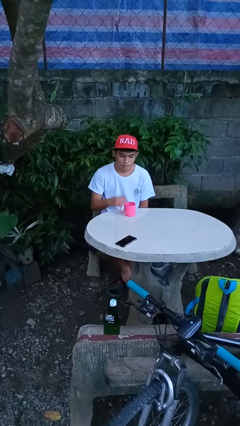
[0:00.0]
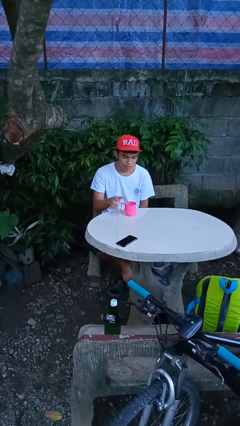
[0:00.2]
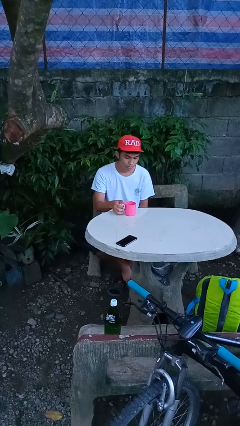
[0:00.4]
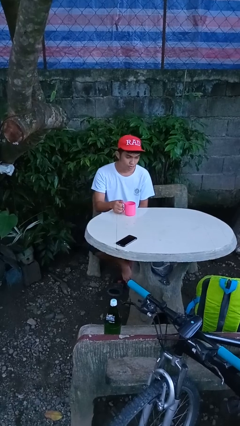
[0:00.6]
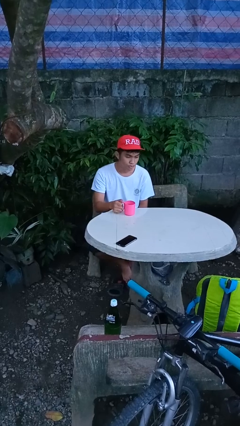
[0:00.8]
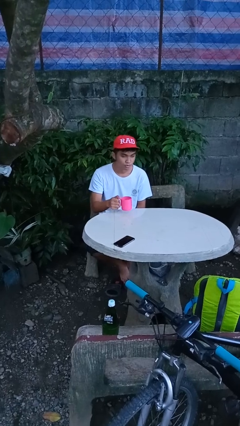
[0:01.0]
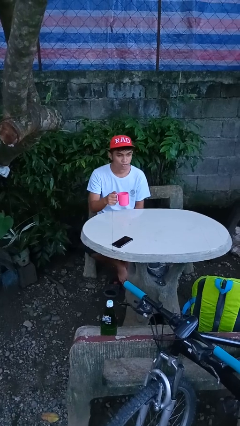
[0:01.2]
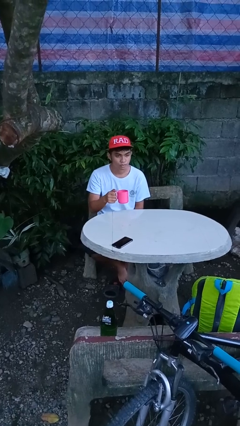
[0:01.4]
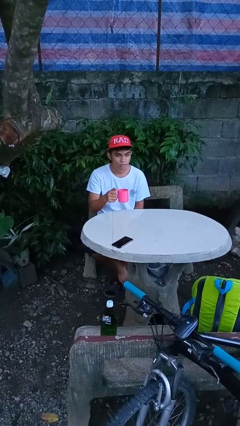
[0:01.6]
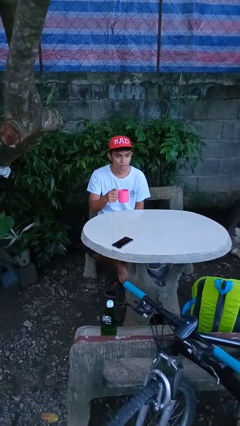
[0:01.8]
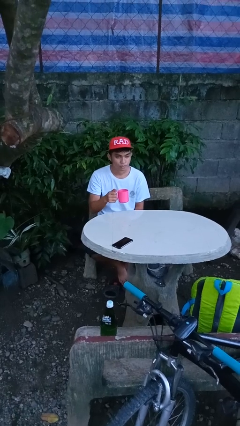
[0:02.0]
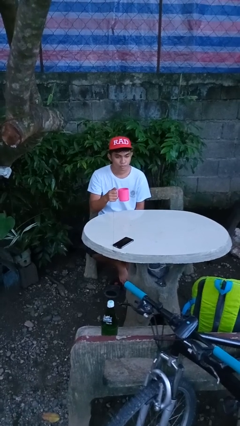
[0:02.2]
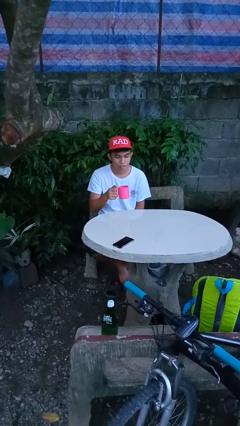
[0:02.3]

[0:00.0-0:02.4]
person picks up object from table

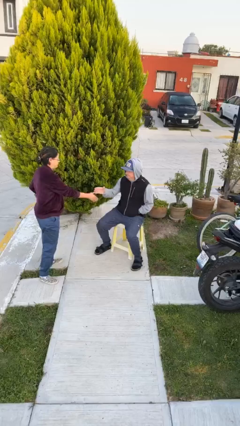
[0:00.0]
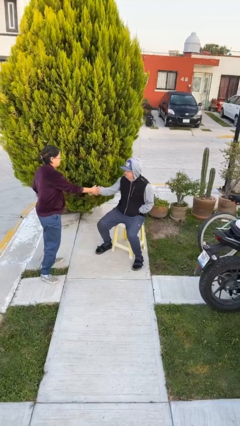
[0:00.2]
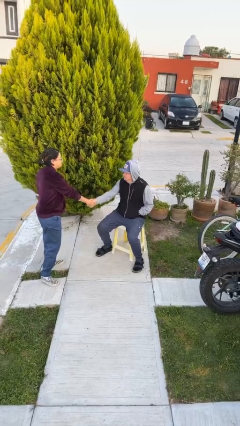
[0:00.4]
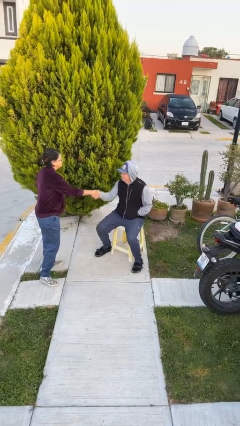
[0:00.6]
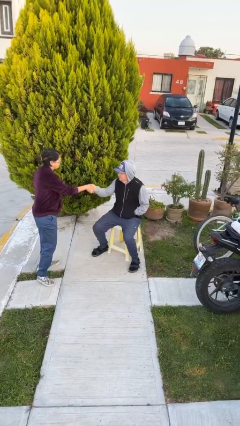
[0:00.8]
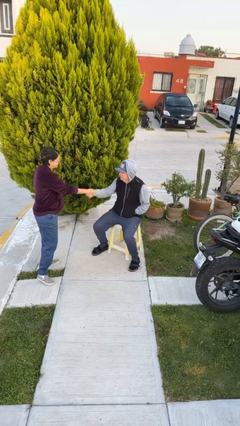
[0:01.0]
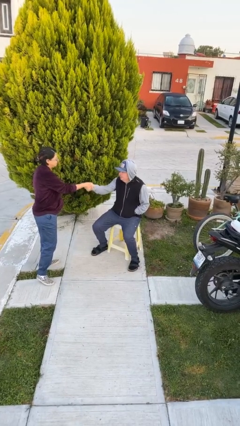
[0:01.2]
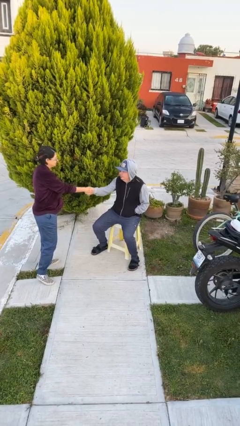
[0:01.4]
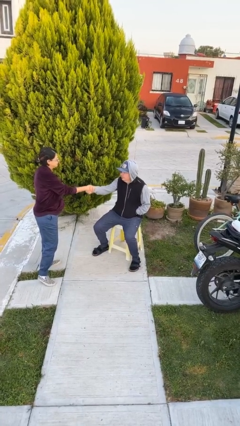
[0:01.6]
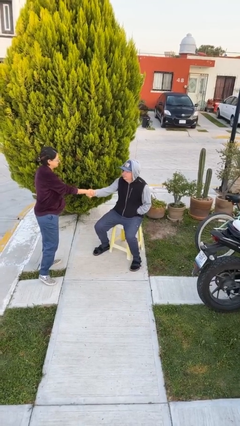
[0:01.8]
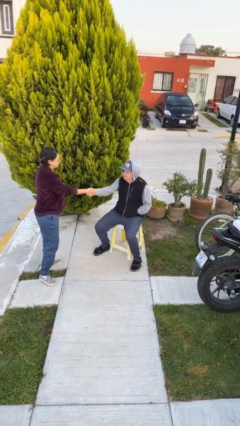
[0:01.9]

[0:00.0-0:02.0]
person shakes hand

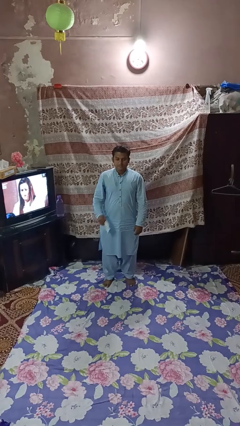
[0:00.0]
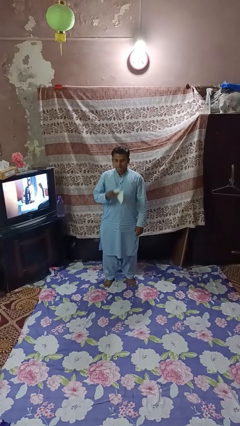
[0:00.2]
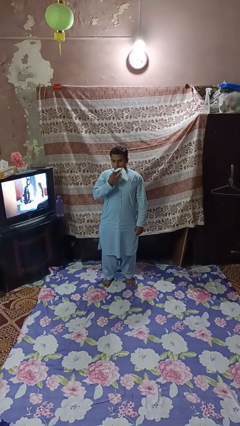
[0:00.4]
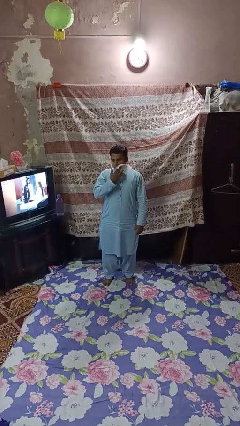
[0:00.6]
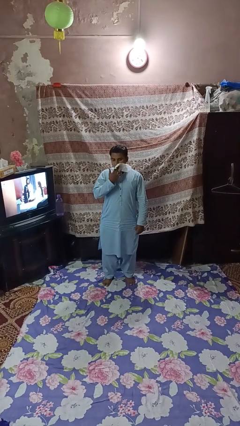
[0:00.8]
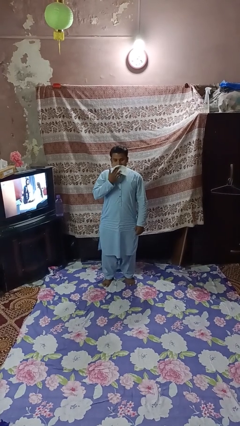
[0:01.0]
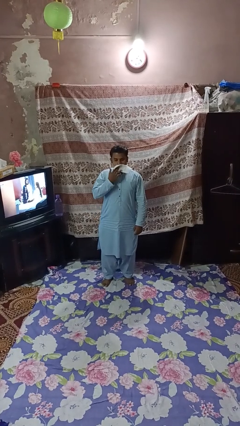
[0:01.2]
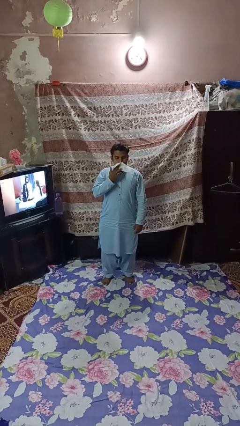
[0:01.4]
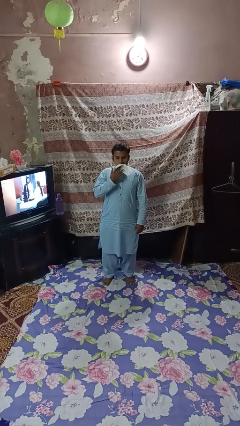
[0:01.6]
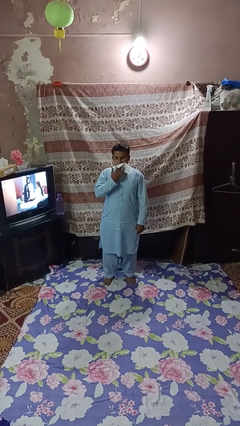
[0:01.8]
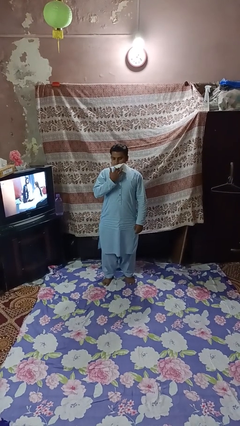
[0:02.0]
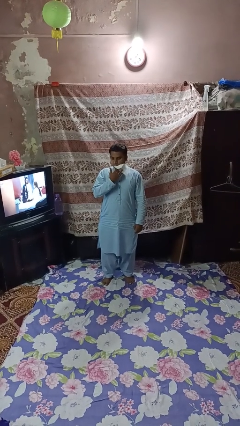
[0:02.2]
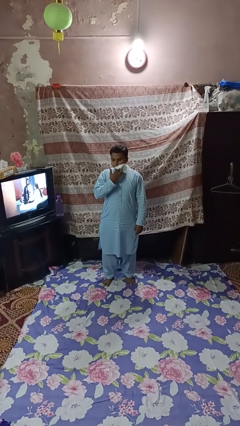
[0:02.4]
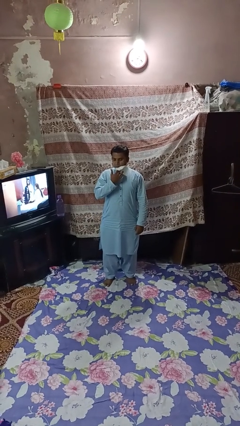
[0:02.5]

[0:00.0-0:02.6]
person wipes mouth with napkin

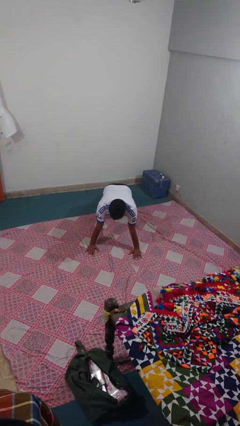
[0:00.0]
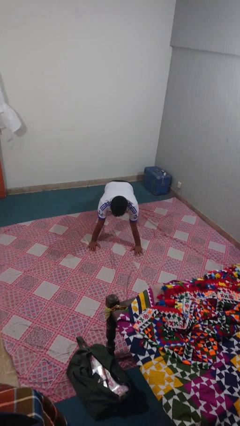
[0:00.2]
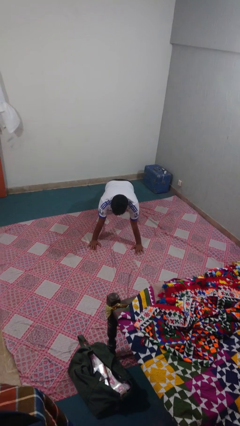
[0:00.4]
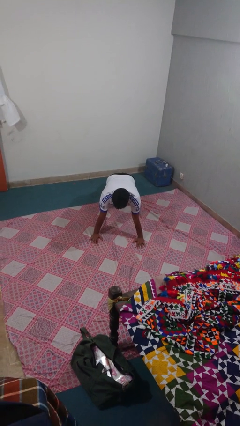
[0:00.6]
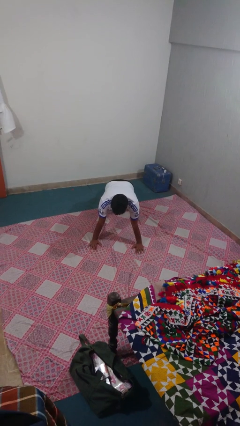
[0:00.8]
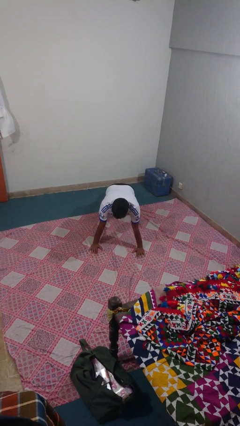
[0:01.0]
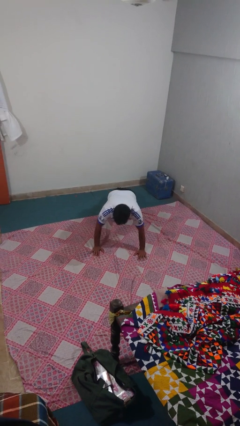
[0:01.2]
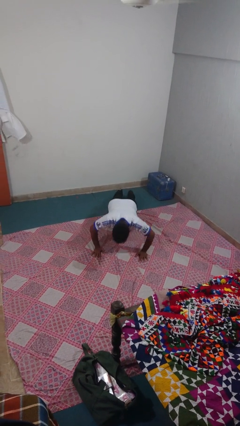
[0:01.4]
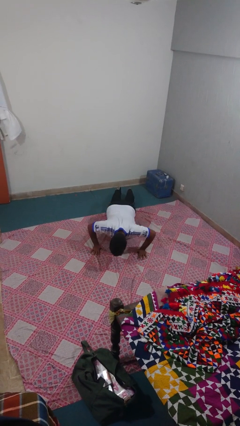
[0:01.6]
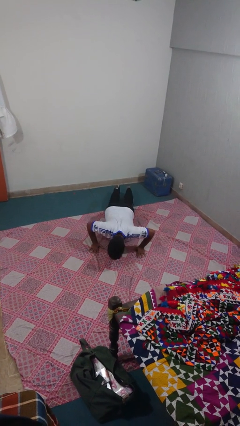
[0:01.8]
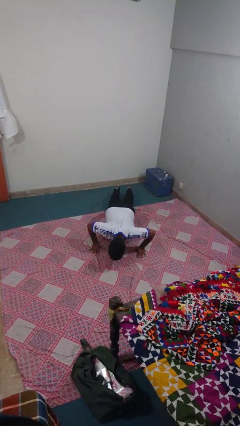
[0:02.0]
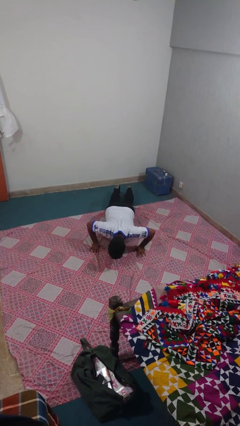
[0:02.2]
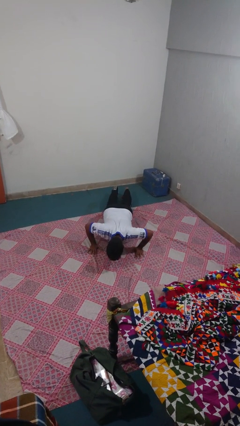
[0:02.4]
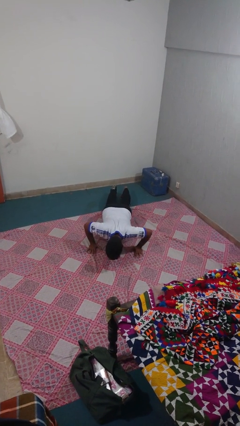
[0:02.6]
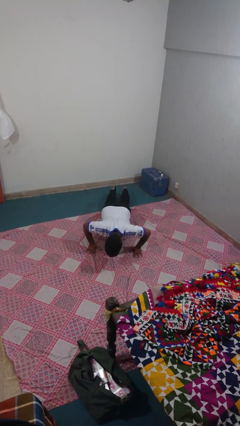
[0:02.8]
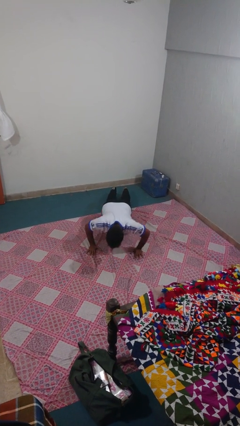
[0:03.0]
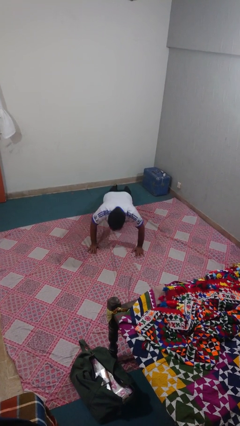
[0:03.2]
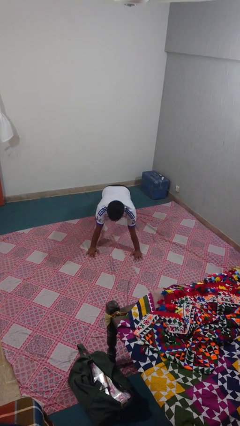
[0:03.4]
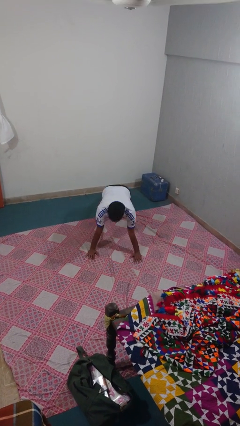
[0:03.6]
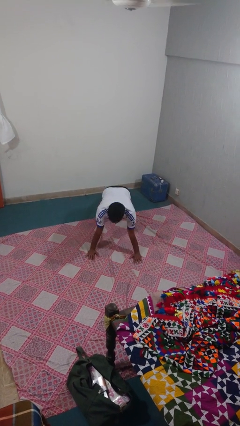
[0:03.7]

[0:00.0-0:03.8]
person exercises with pushup

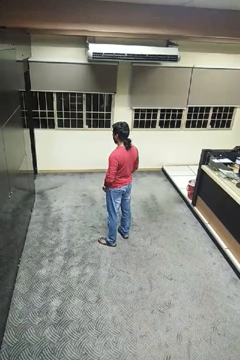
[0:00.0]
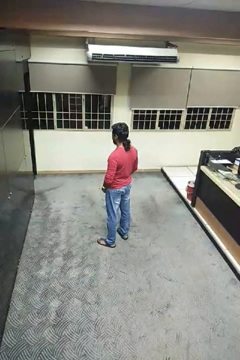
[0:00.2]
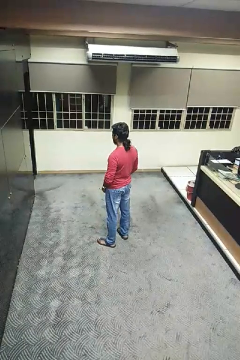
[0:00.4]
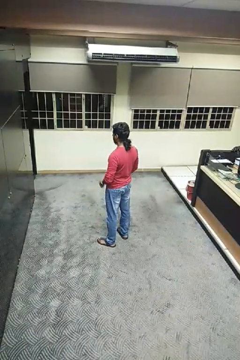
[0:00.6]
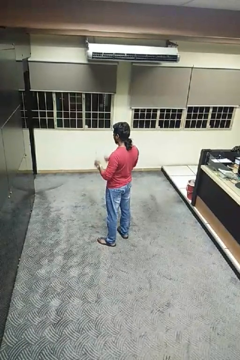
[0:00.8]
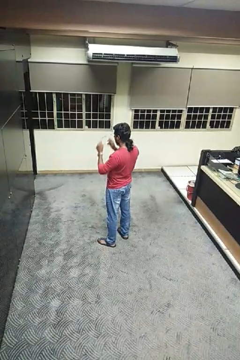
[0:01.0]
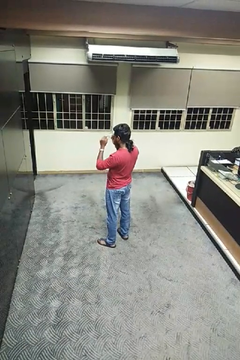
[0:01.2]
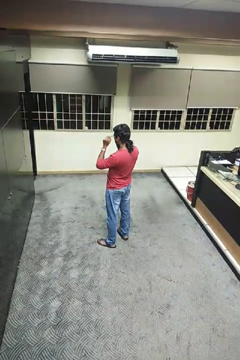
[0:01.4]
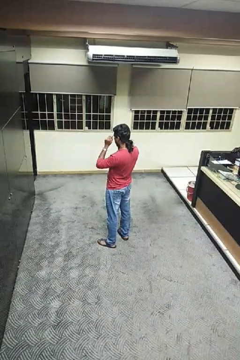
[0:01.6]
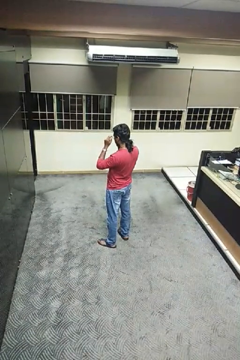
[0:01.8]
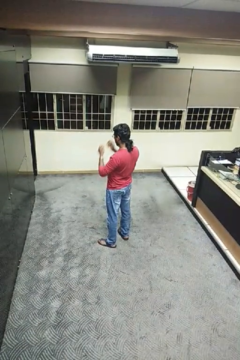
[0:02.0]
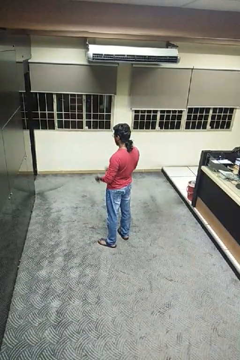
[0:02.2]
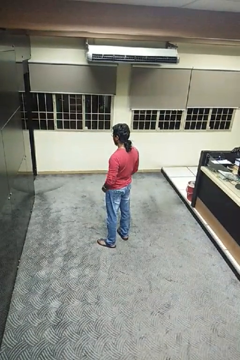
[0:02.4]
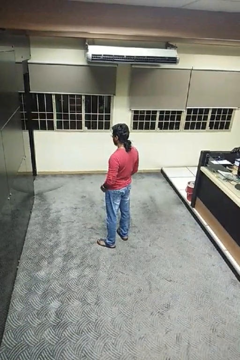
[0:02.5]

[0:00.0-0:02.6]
person puts on glasses

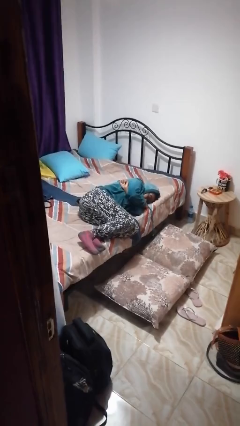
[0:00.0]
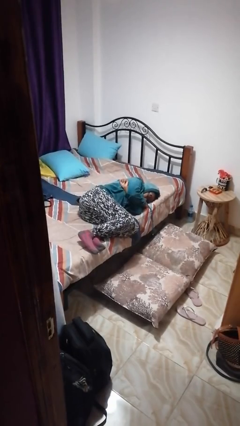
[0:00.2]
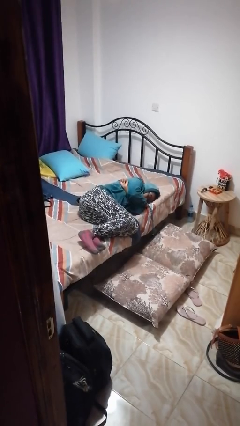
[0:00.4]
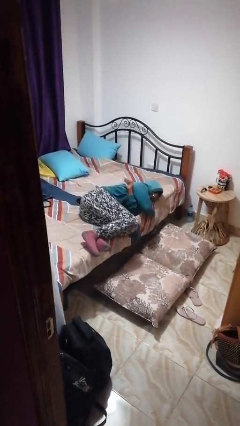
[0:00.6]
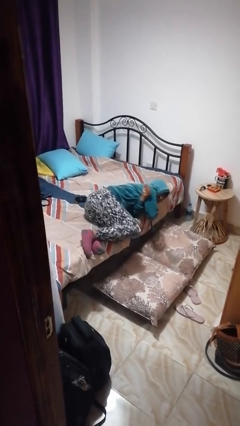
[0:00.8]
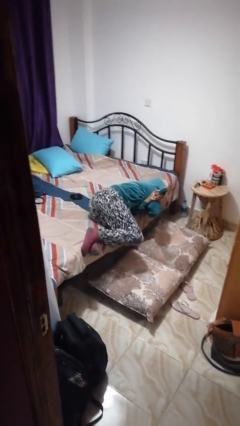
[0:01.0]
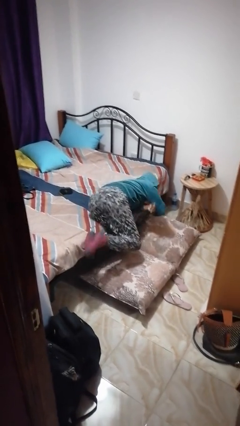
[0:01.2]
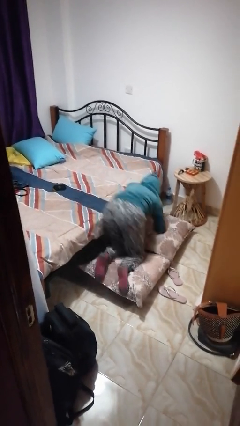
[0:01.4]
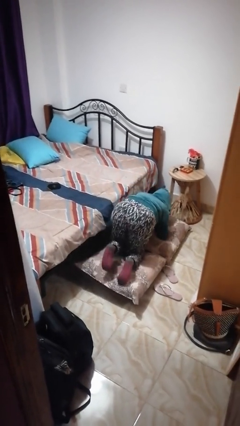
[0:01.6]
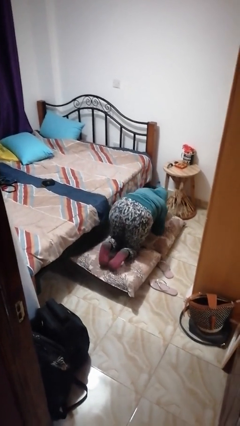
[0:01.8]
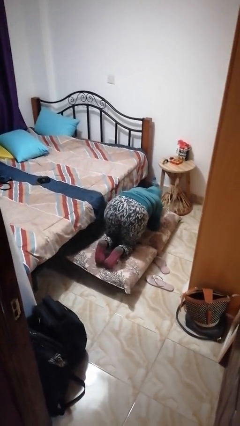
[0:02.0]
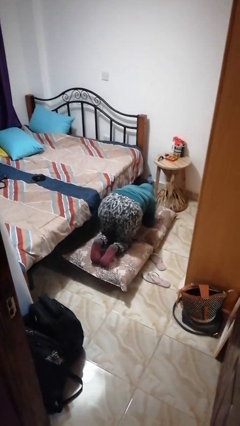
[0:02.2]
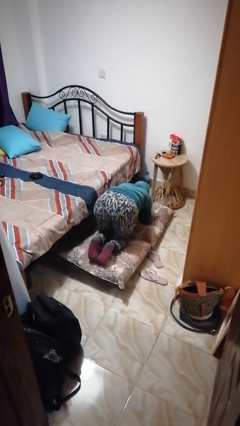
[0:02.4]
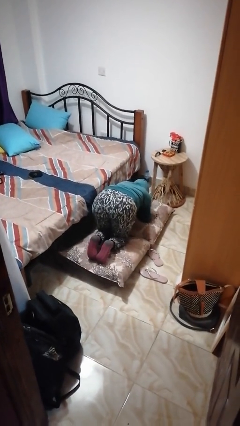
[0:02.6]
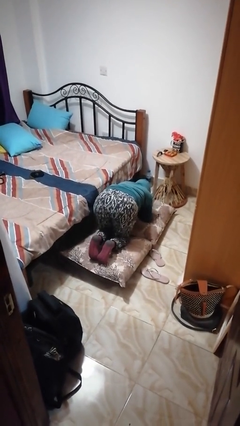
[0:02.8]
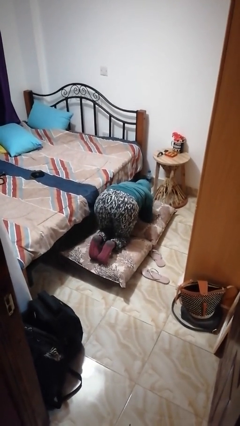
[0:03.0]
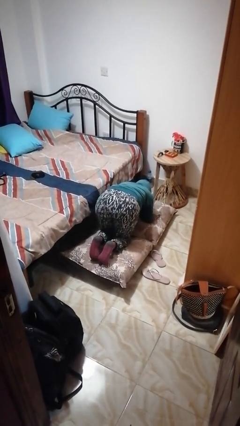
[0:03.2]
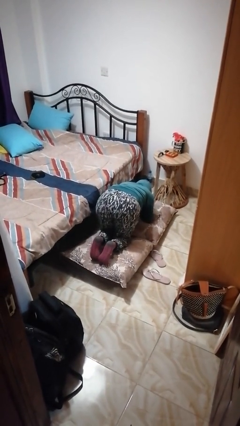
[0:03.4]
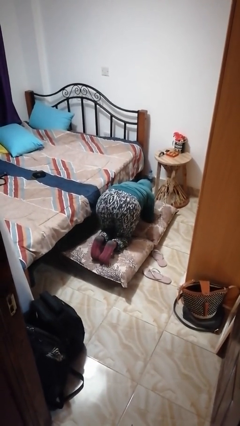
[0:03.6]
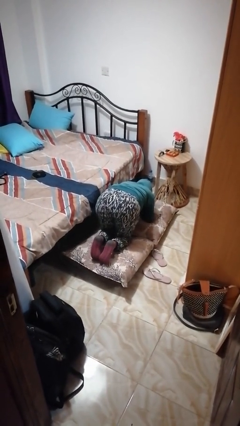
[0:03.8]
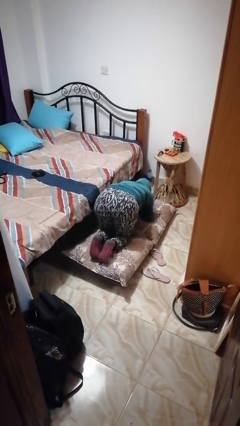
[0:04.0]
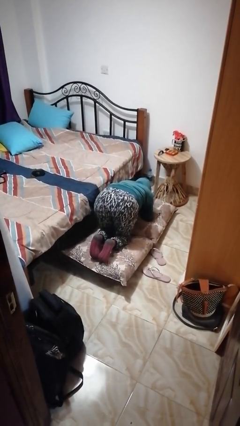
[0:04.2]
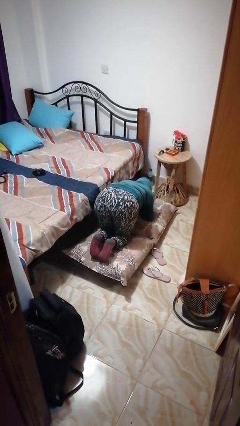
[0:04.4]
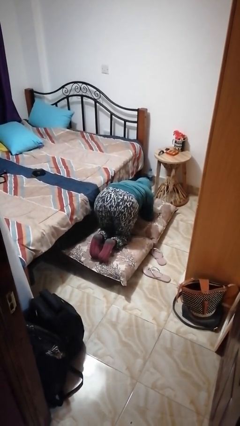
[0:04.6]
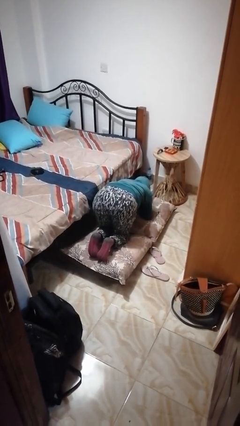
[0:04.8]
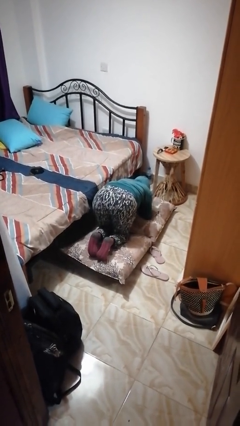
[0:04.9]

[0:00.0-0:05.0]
person falls from bed
